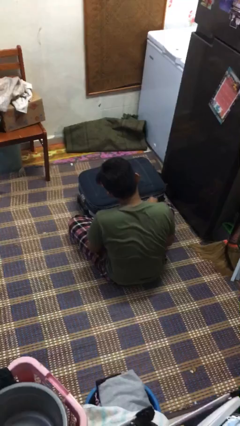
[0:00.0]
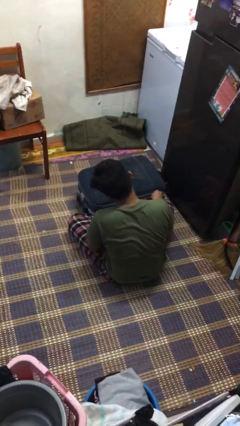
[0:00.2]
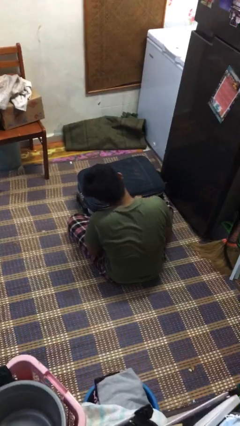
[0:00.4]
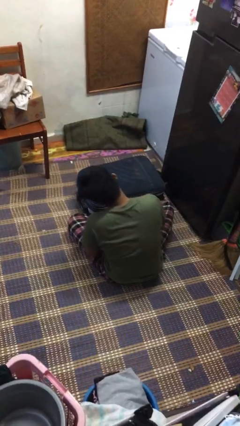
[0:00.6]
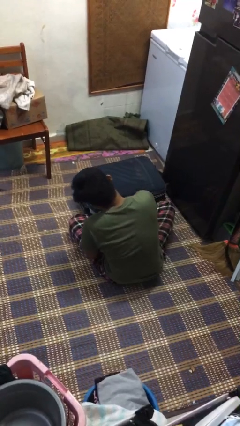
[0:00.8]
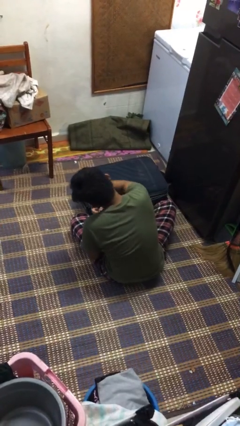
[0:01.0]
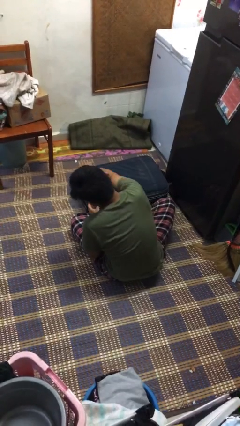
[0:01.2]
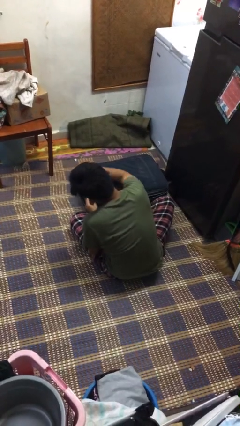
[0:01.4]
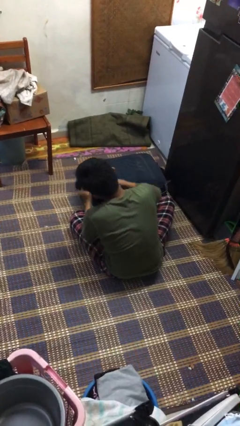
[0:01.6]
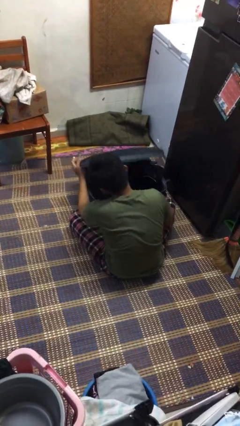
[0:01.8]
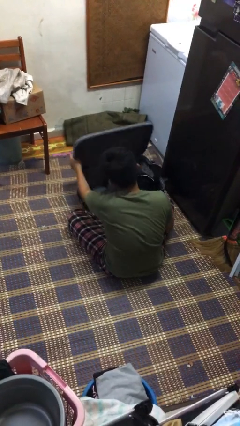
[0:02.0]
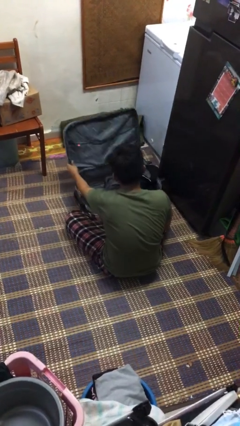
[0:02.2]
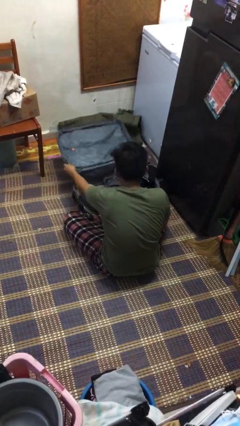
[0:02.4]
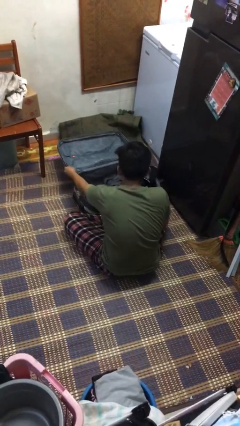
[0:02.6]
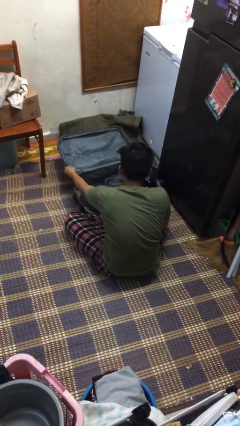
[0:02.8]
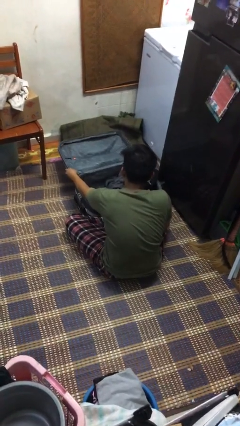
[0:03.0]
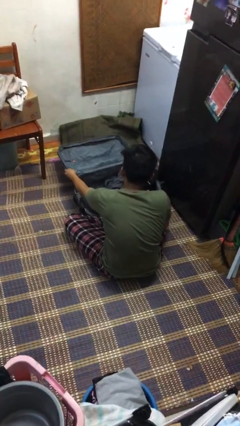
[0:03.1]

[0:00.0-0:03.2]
person opens suitcase

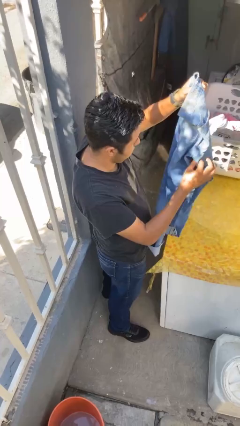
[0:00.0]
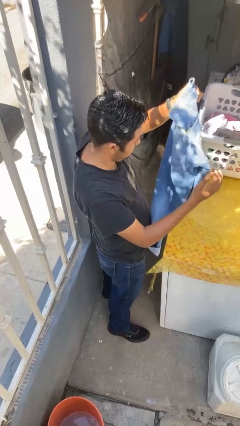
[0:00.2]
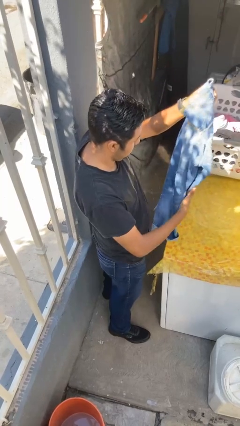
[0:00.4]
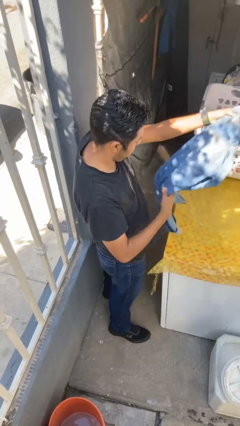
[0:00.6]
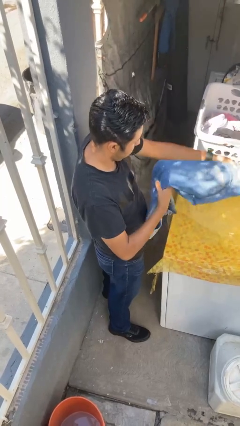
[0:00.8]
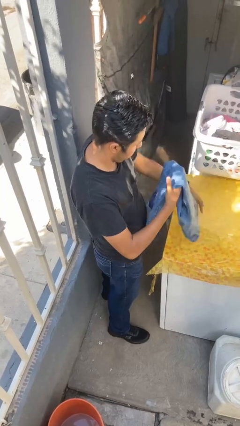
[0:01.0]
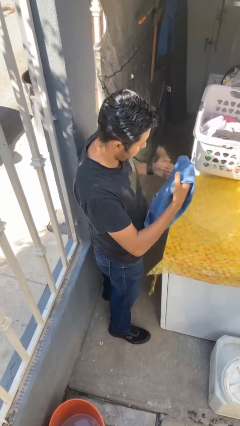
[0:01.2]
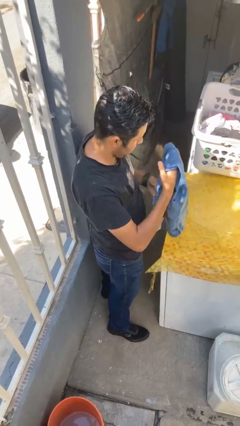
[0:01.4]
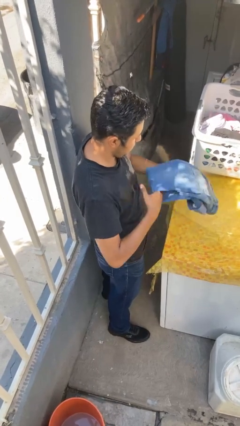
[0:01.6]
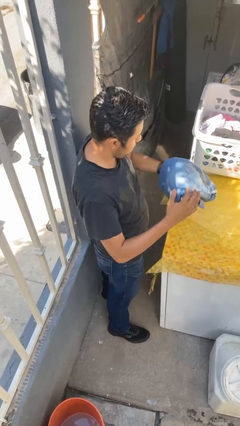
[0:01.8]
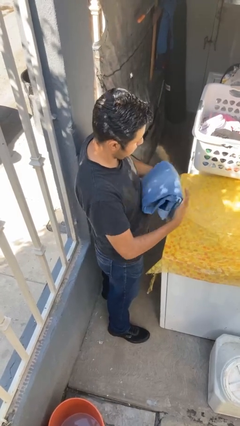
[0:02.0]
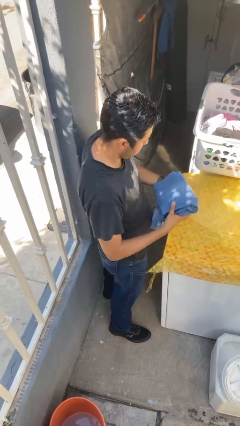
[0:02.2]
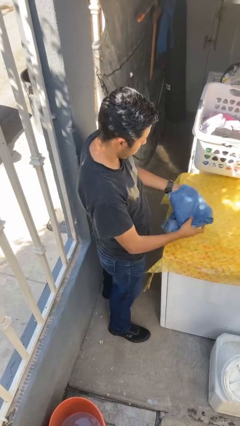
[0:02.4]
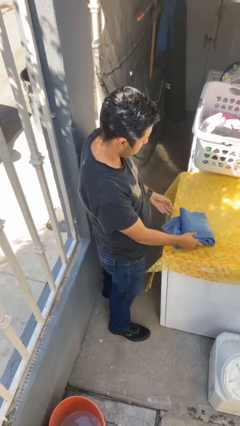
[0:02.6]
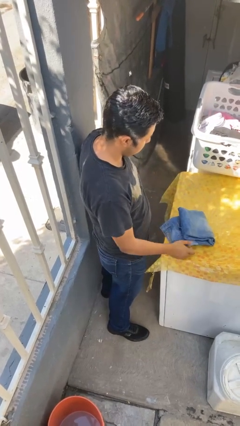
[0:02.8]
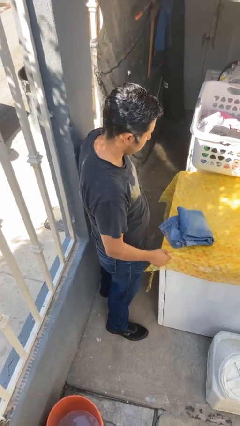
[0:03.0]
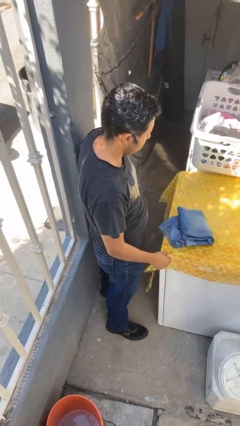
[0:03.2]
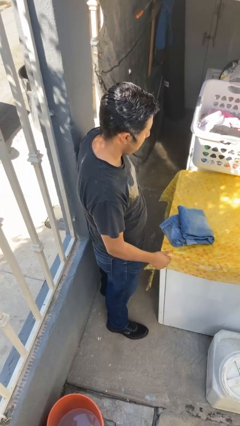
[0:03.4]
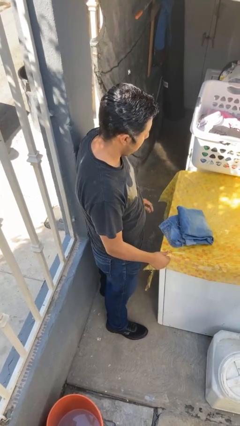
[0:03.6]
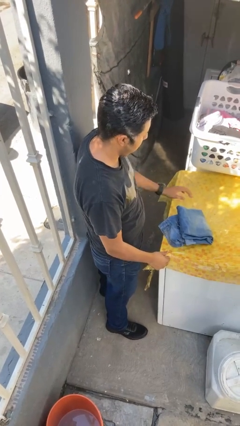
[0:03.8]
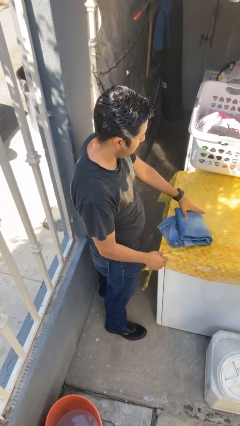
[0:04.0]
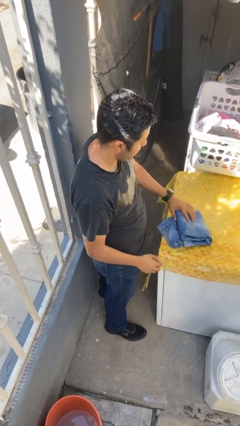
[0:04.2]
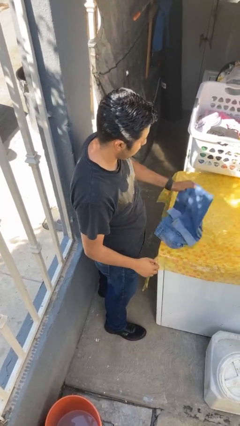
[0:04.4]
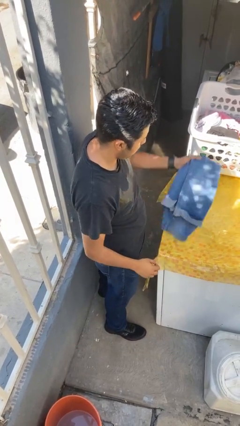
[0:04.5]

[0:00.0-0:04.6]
person folds pants

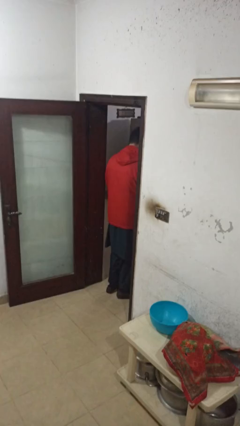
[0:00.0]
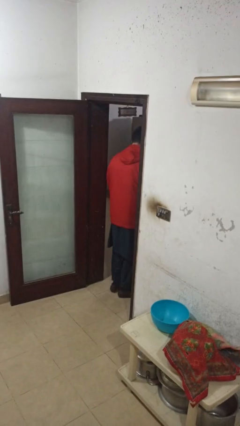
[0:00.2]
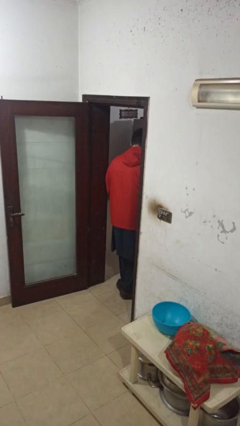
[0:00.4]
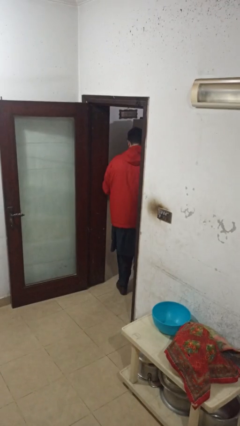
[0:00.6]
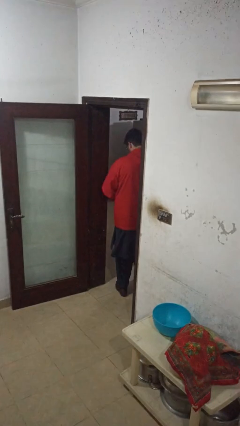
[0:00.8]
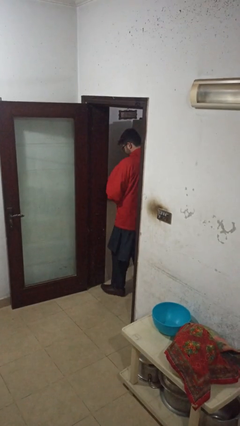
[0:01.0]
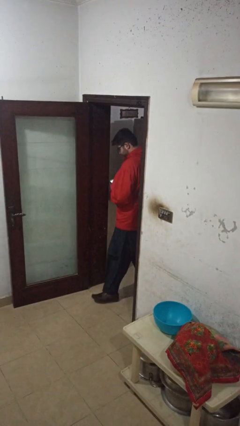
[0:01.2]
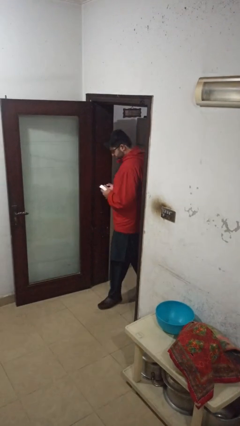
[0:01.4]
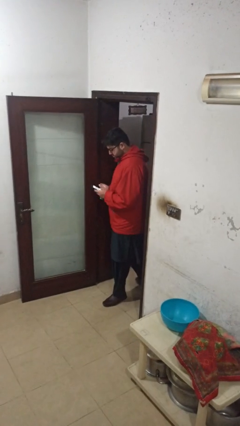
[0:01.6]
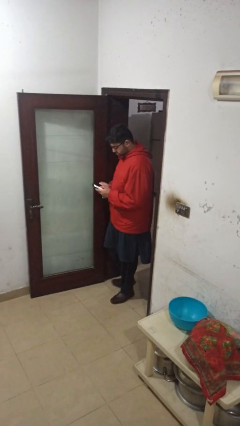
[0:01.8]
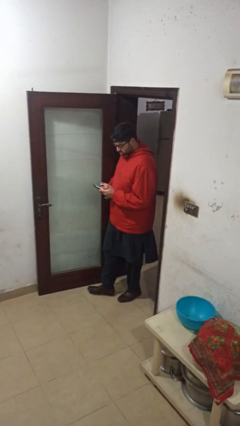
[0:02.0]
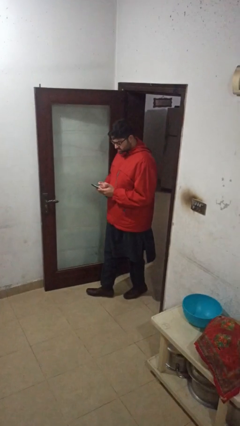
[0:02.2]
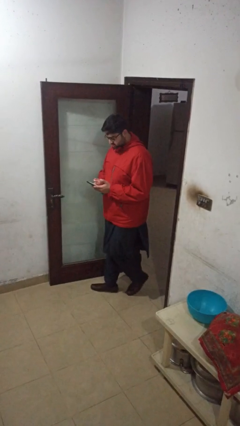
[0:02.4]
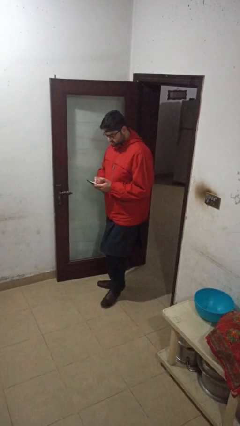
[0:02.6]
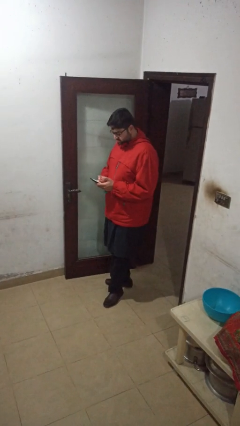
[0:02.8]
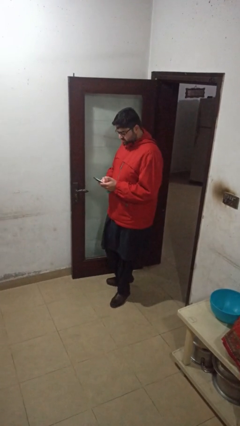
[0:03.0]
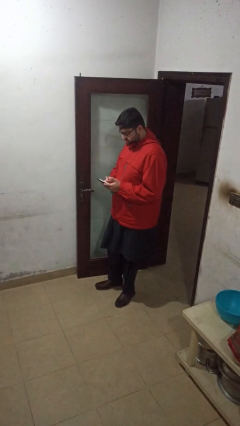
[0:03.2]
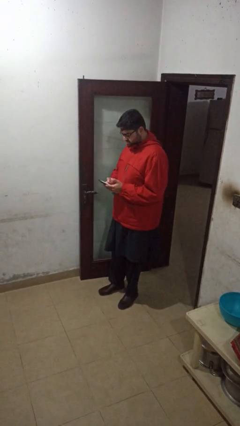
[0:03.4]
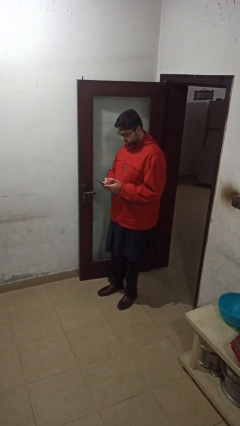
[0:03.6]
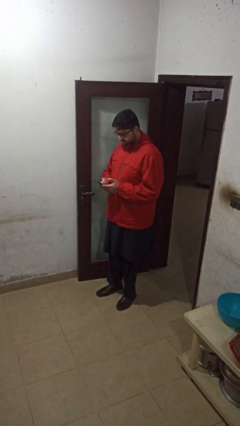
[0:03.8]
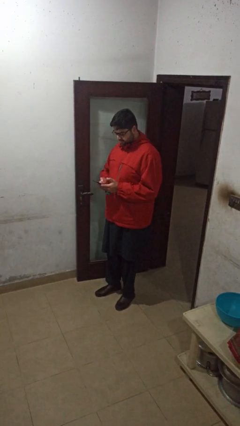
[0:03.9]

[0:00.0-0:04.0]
person enters scene through structure

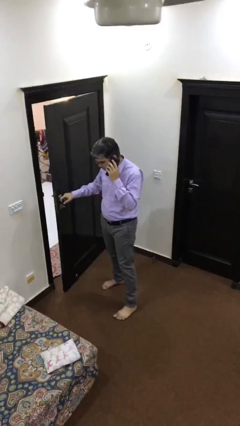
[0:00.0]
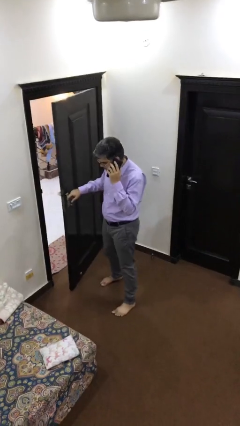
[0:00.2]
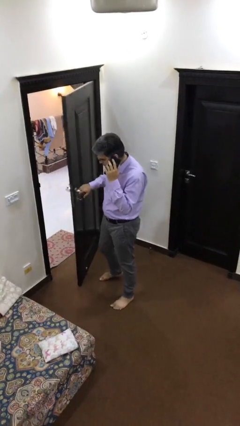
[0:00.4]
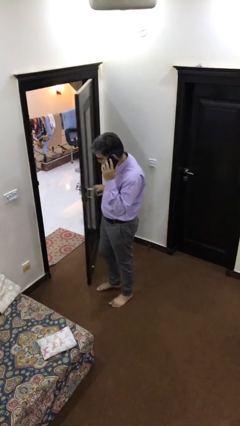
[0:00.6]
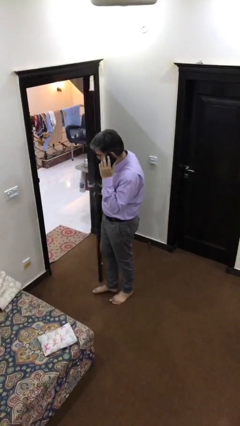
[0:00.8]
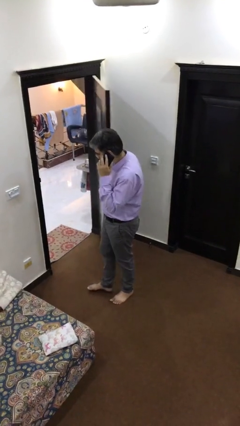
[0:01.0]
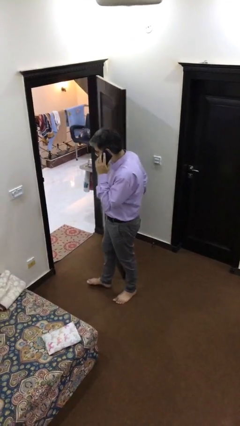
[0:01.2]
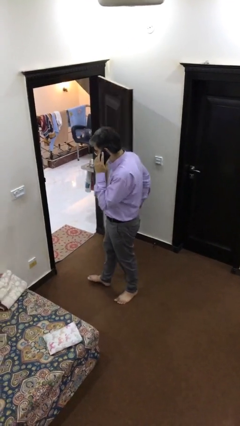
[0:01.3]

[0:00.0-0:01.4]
person opens facility door

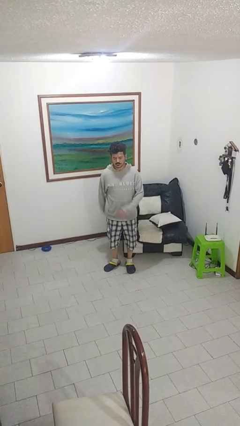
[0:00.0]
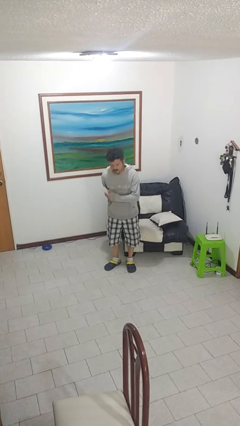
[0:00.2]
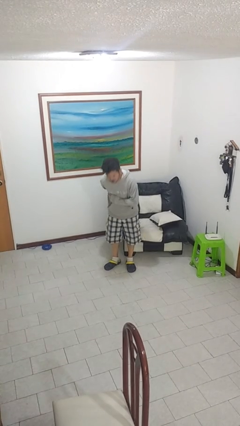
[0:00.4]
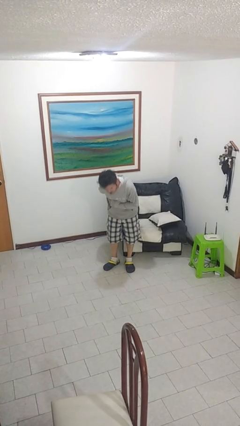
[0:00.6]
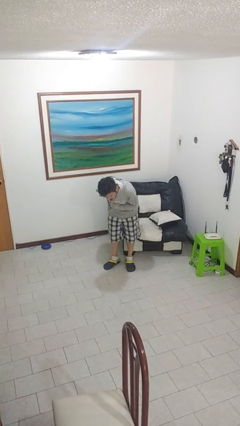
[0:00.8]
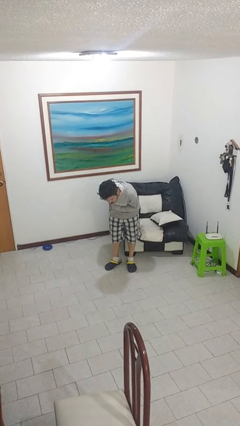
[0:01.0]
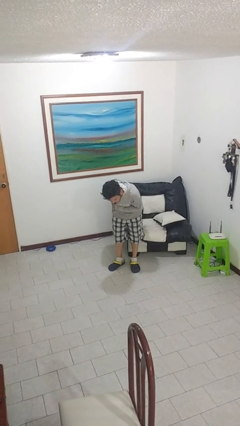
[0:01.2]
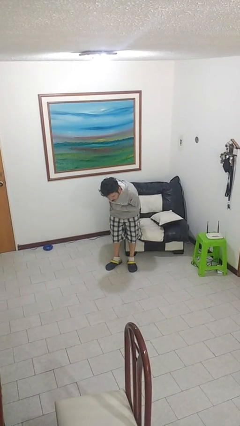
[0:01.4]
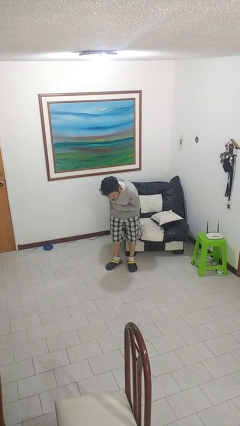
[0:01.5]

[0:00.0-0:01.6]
person bows

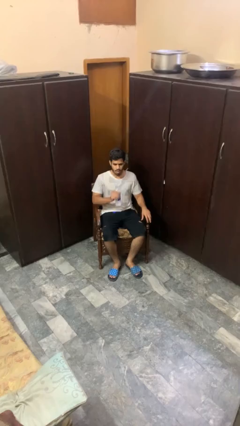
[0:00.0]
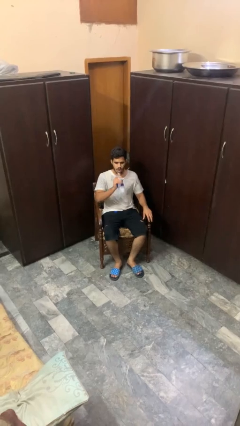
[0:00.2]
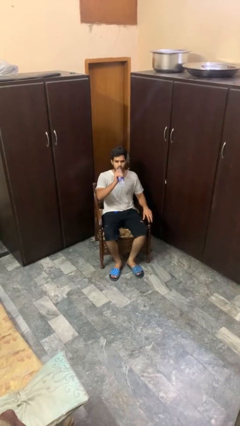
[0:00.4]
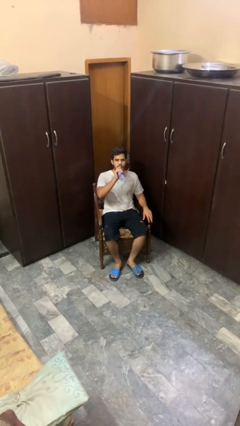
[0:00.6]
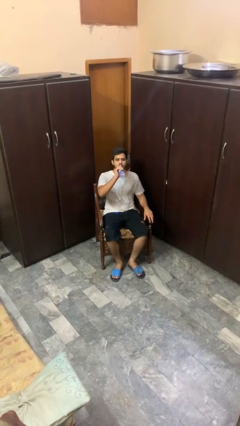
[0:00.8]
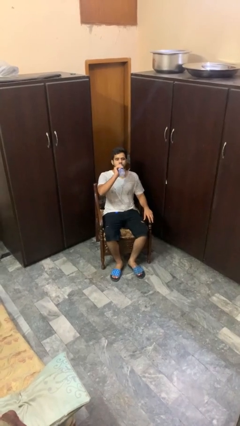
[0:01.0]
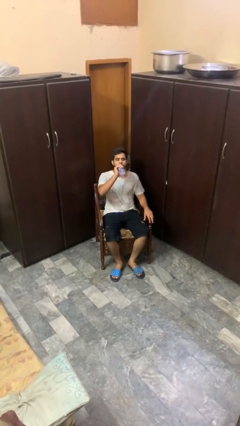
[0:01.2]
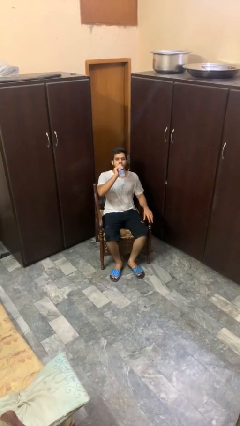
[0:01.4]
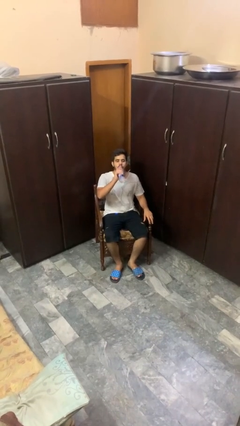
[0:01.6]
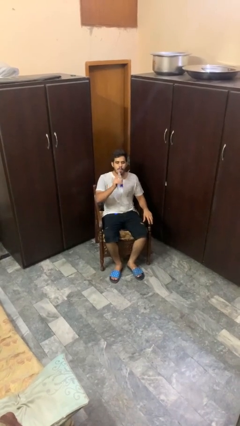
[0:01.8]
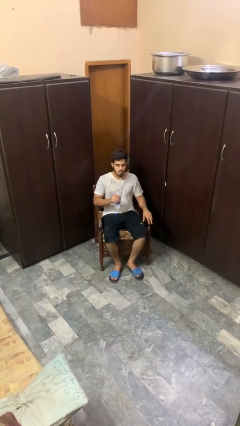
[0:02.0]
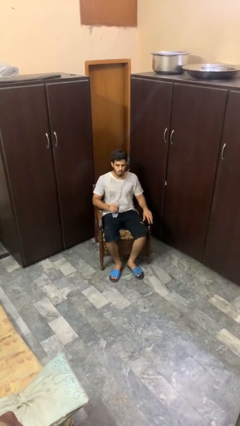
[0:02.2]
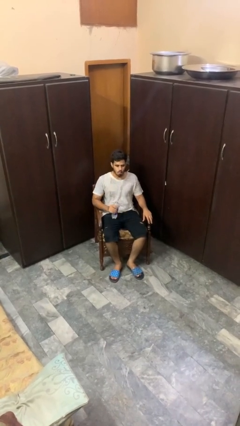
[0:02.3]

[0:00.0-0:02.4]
person drinks from bottle
